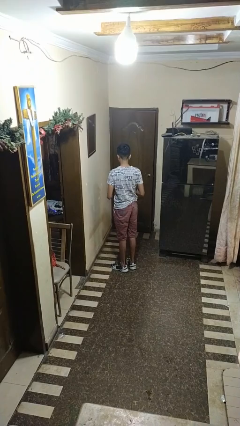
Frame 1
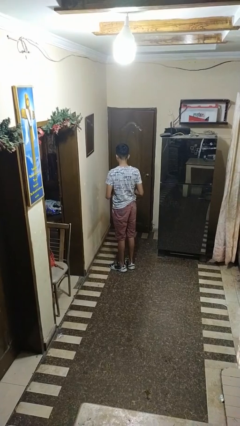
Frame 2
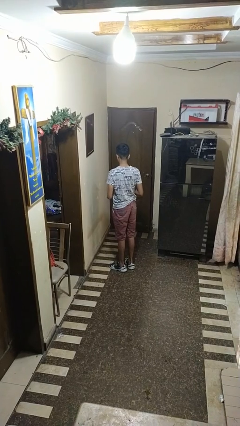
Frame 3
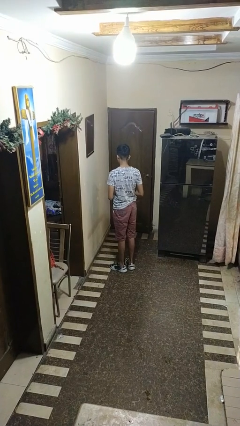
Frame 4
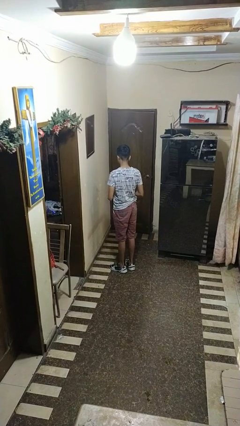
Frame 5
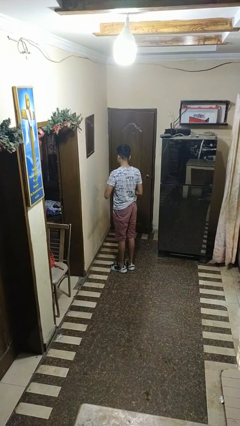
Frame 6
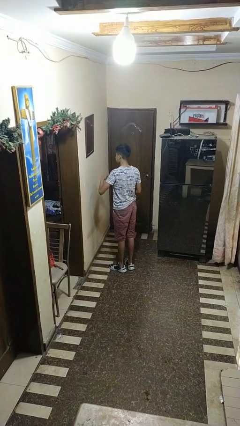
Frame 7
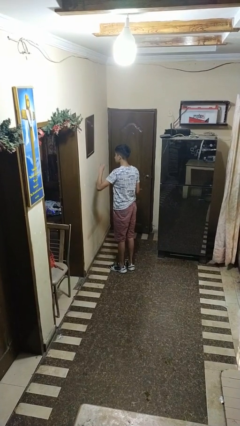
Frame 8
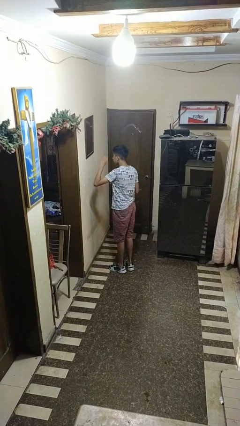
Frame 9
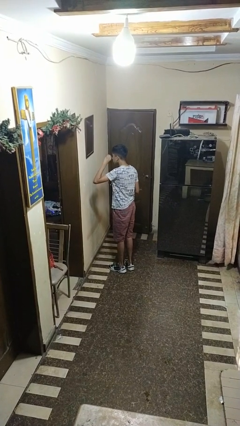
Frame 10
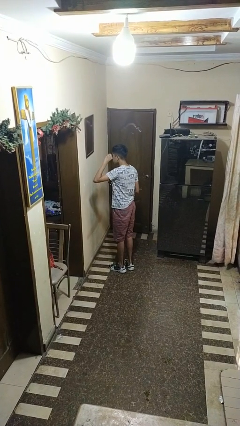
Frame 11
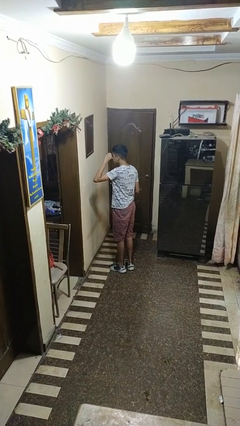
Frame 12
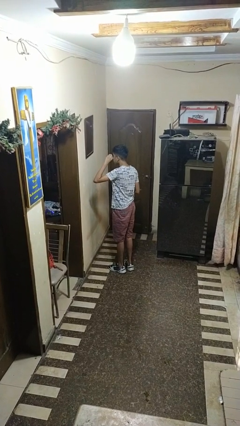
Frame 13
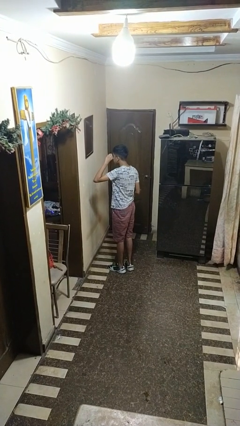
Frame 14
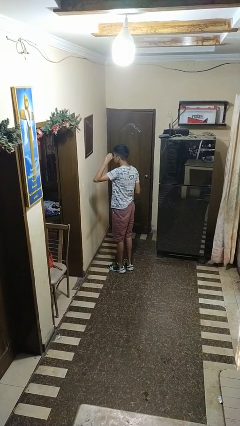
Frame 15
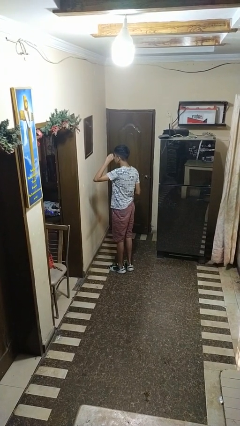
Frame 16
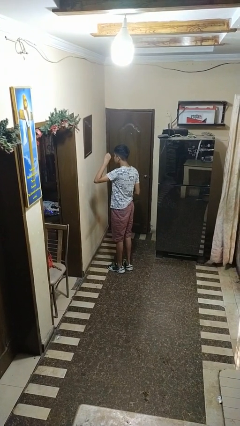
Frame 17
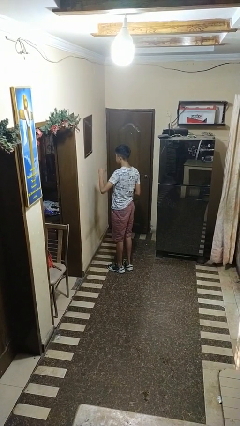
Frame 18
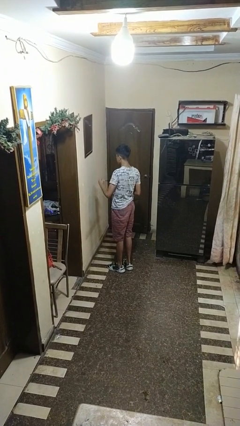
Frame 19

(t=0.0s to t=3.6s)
person applies eye makeup

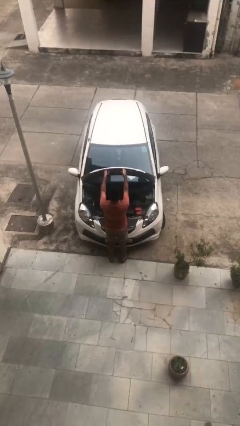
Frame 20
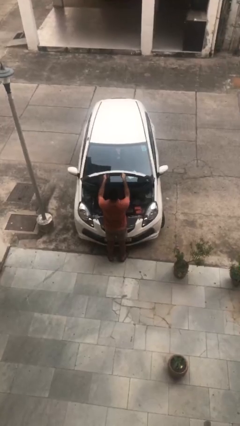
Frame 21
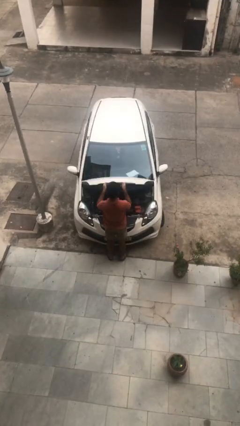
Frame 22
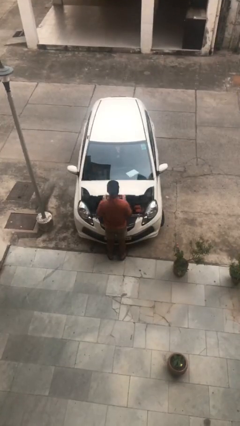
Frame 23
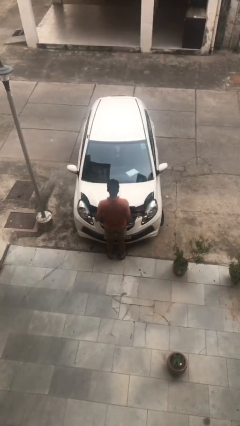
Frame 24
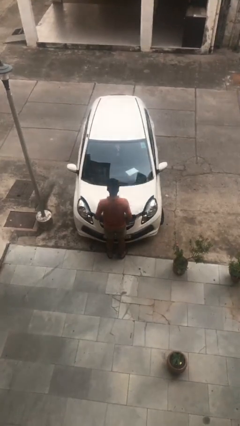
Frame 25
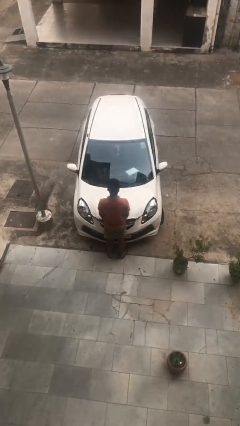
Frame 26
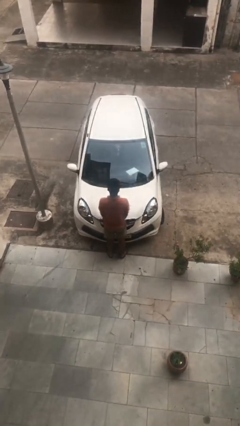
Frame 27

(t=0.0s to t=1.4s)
person closes car hood

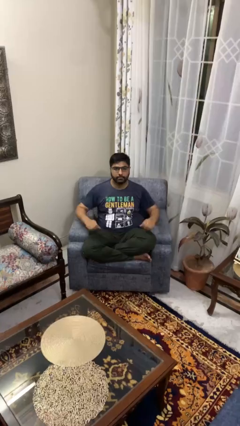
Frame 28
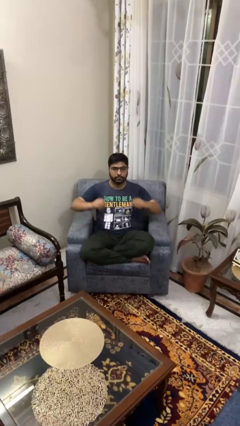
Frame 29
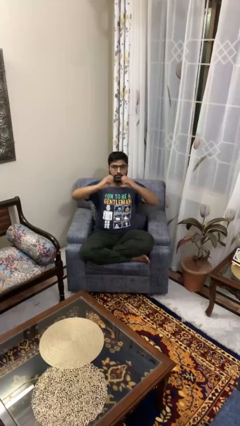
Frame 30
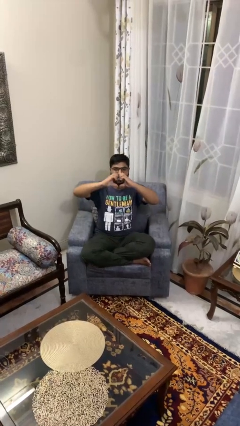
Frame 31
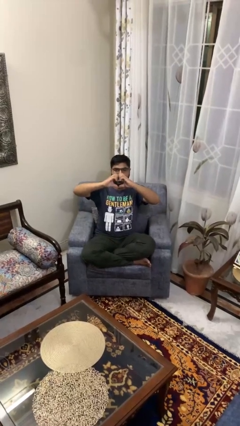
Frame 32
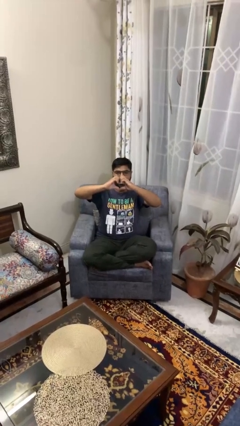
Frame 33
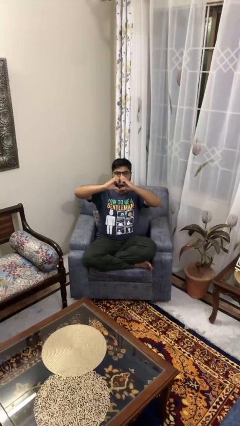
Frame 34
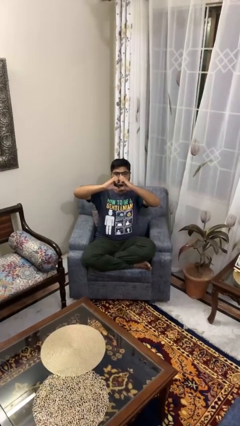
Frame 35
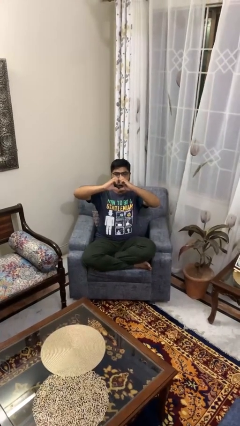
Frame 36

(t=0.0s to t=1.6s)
person gestures heart

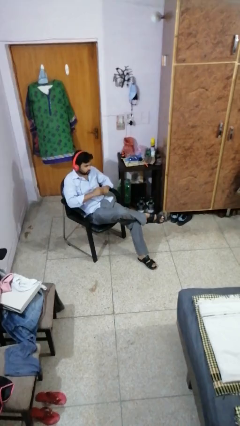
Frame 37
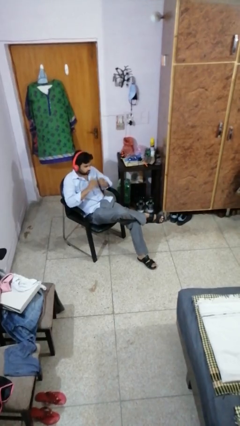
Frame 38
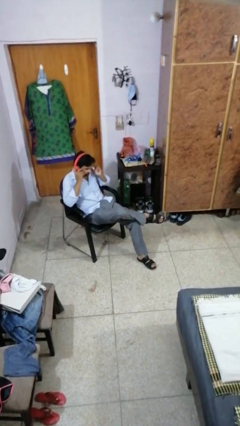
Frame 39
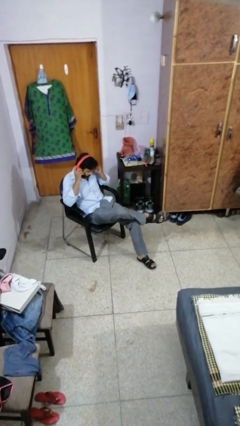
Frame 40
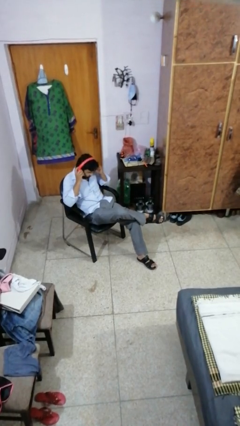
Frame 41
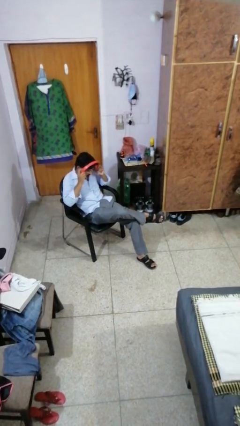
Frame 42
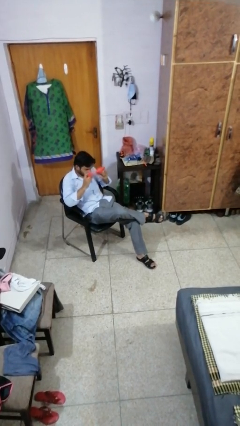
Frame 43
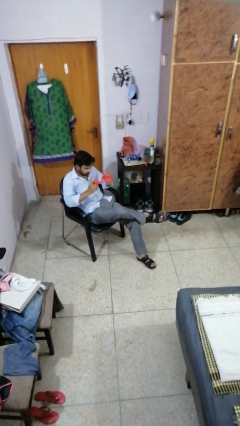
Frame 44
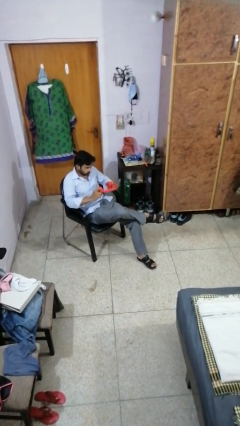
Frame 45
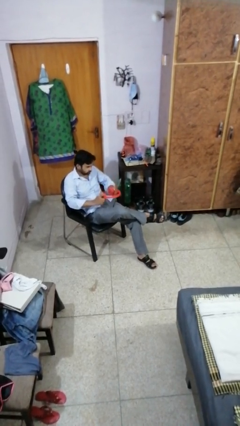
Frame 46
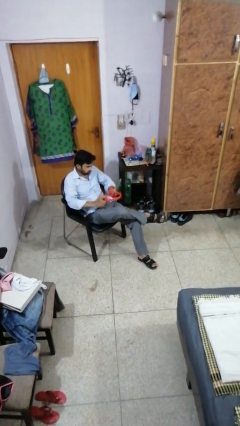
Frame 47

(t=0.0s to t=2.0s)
person takes off headphones

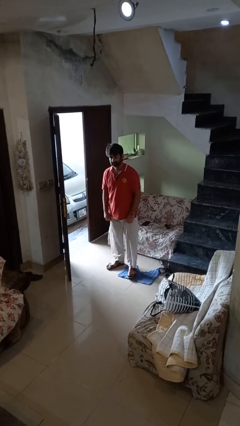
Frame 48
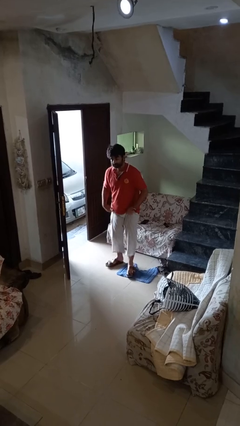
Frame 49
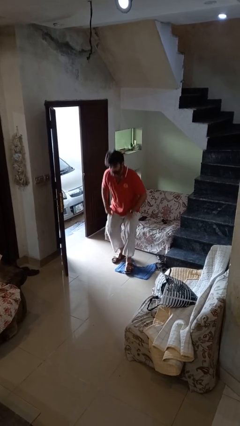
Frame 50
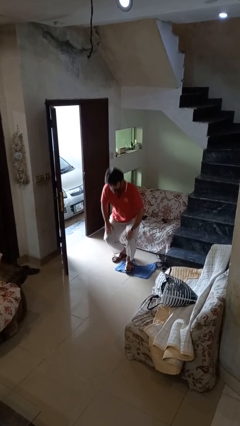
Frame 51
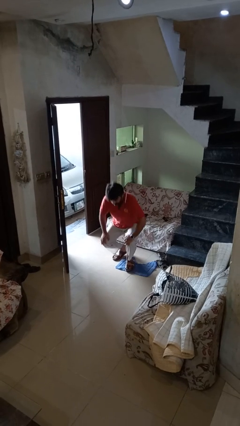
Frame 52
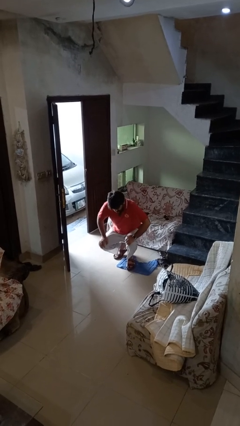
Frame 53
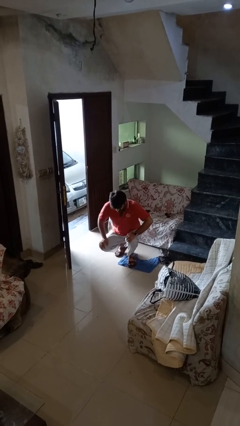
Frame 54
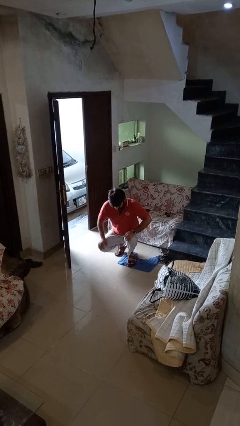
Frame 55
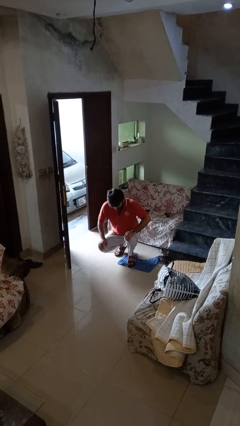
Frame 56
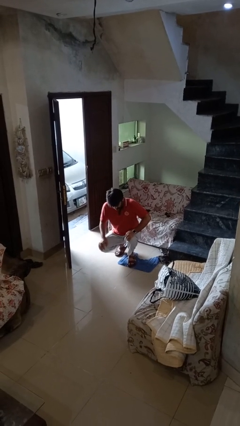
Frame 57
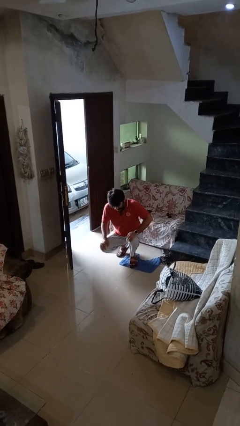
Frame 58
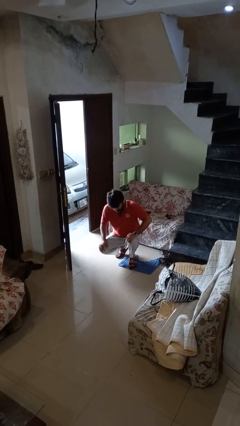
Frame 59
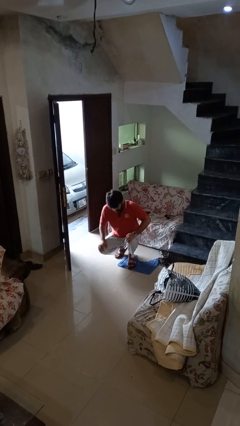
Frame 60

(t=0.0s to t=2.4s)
person squats

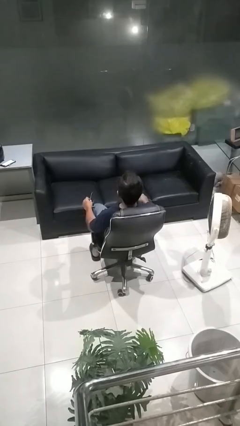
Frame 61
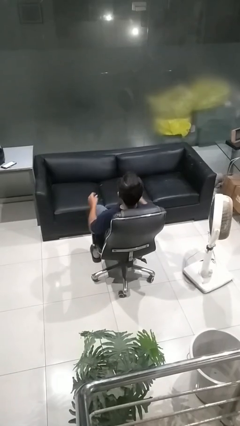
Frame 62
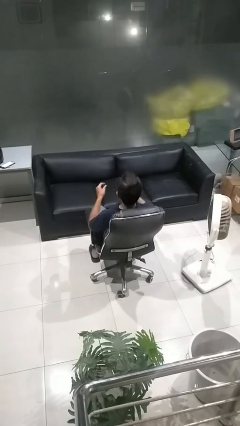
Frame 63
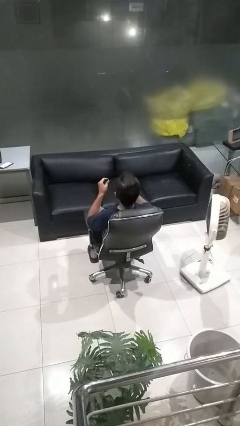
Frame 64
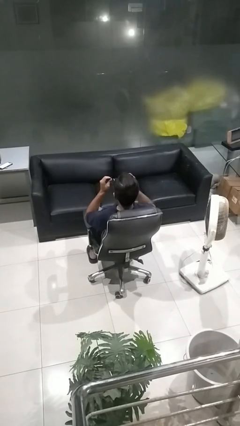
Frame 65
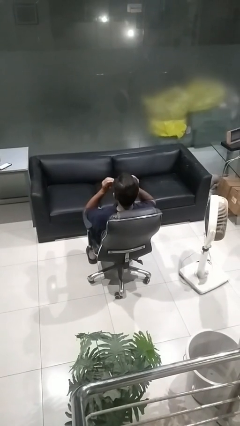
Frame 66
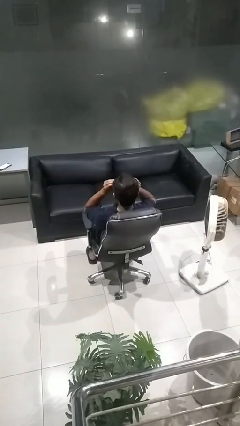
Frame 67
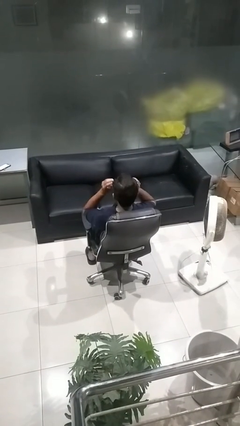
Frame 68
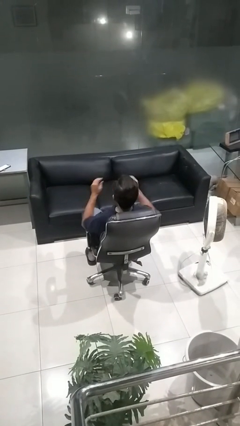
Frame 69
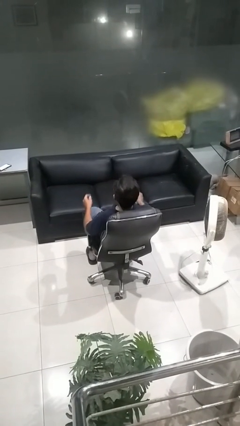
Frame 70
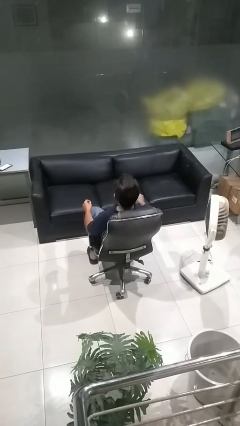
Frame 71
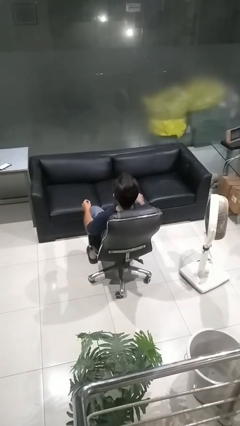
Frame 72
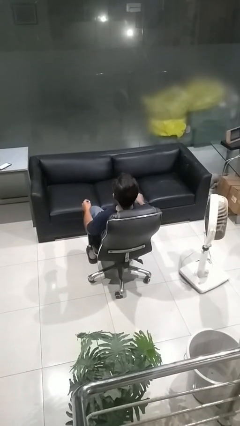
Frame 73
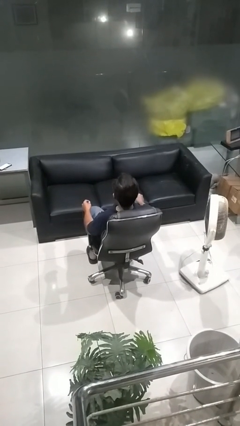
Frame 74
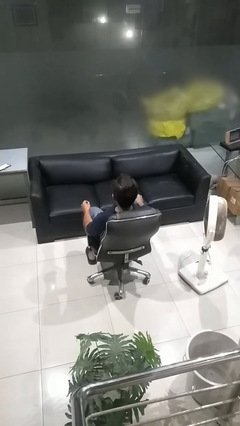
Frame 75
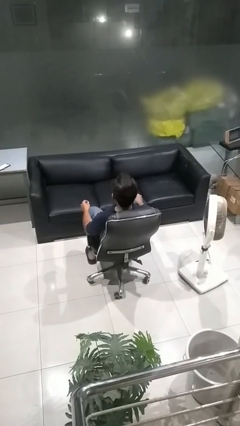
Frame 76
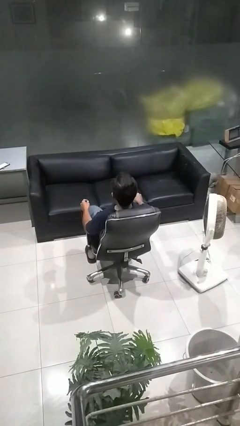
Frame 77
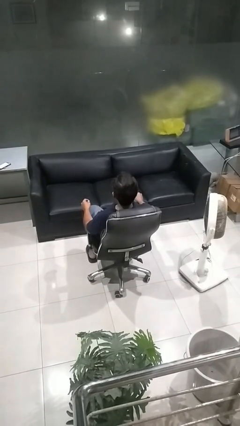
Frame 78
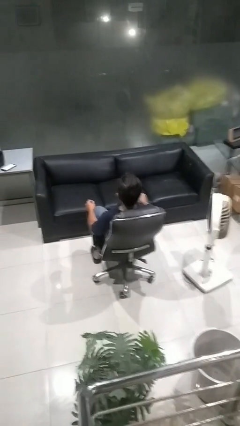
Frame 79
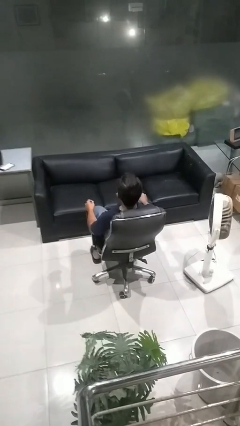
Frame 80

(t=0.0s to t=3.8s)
person puts on sunglasses

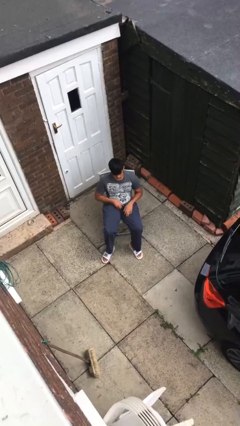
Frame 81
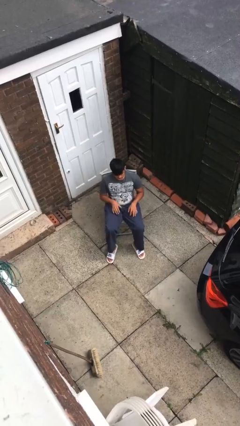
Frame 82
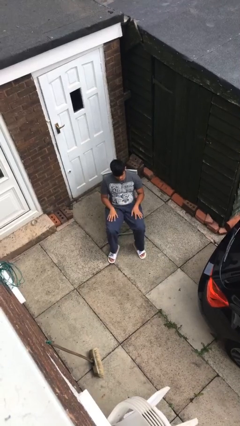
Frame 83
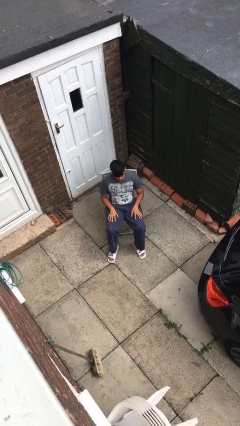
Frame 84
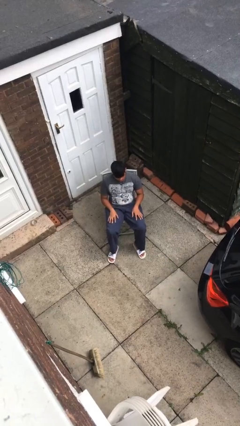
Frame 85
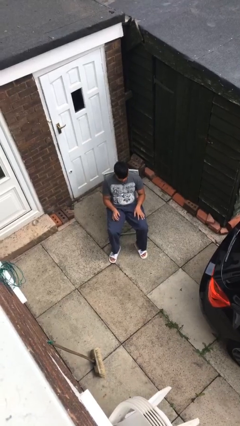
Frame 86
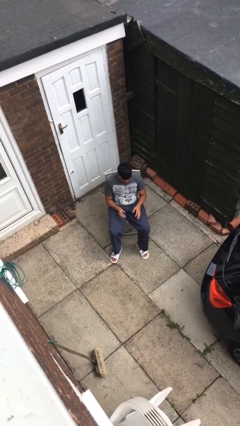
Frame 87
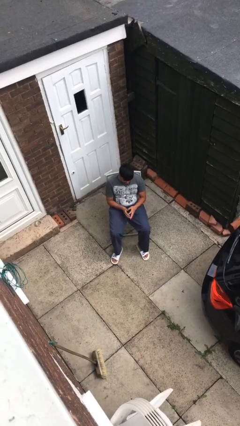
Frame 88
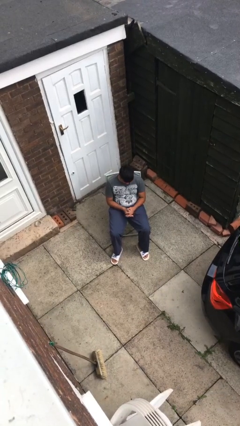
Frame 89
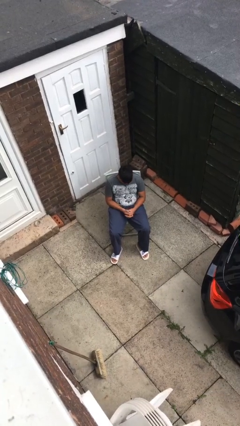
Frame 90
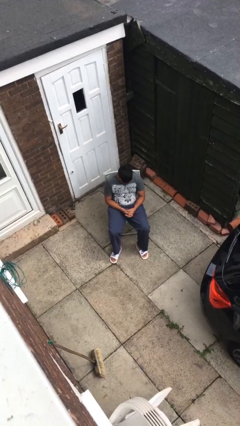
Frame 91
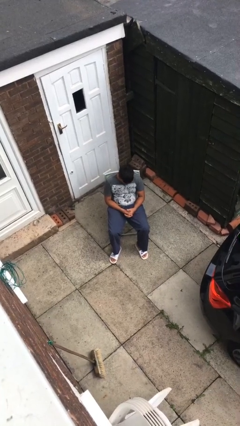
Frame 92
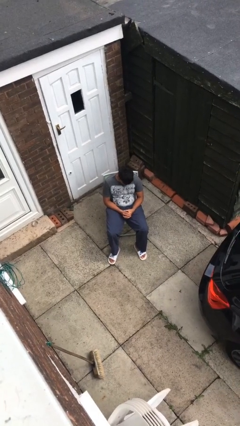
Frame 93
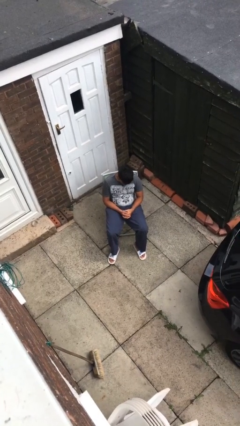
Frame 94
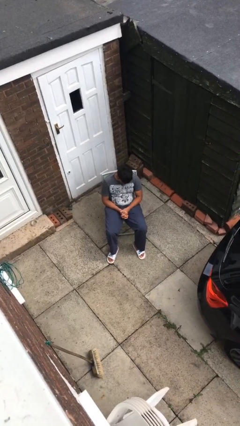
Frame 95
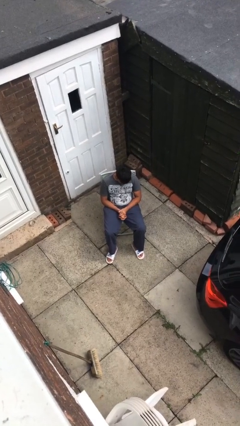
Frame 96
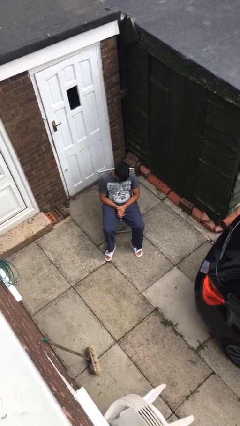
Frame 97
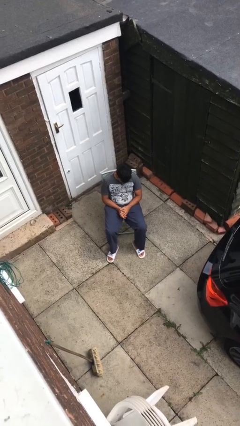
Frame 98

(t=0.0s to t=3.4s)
person looks at hands in lap
